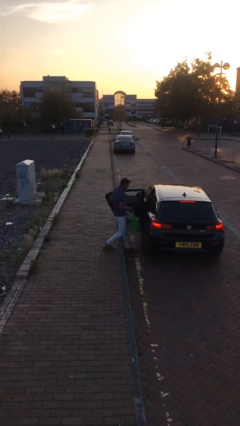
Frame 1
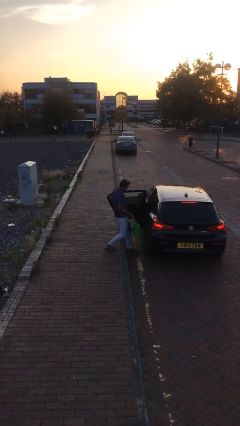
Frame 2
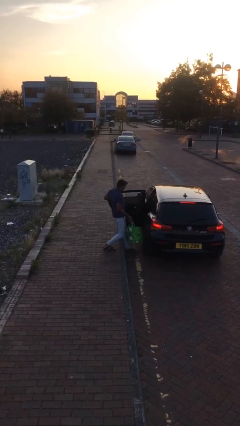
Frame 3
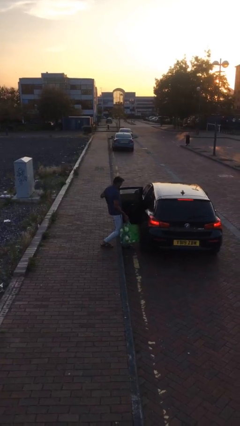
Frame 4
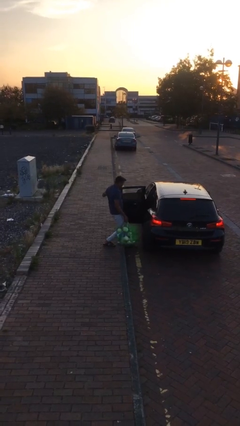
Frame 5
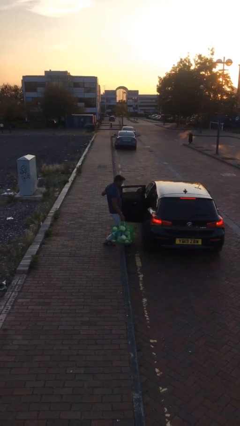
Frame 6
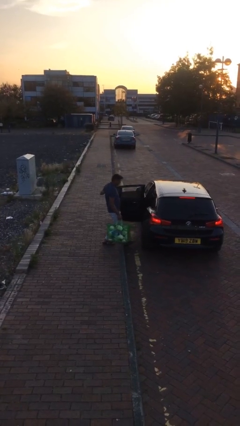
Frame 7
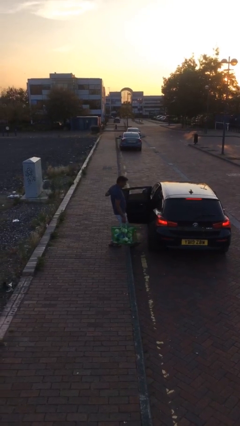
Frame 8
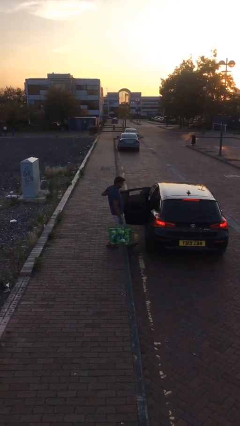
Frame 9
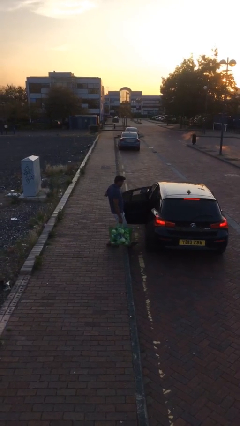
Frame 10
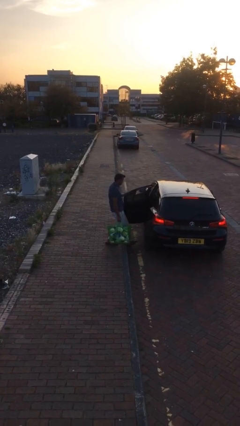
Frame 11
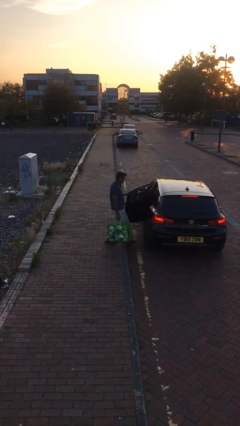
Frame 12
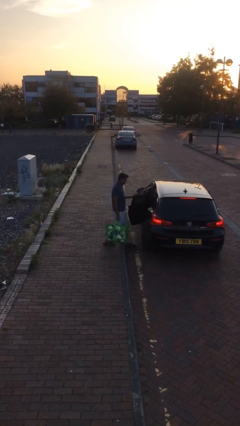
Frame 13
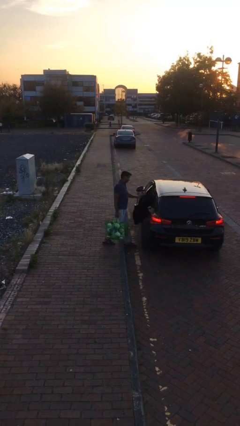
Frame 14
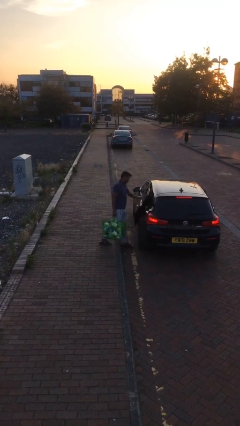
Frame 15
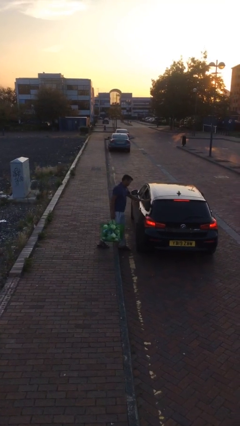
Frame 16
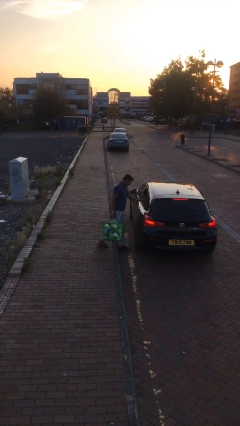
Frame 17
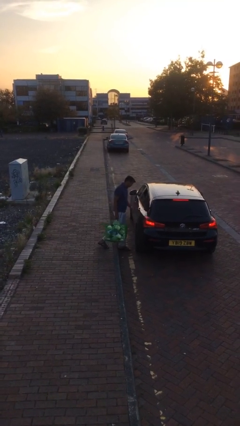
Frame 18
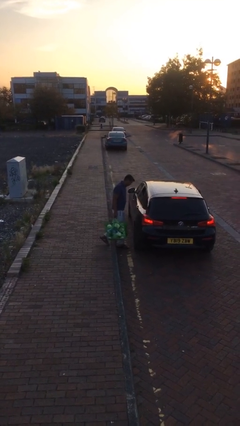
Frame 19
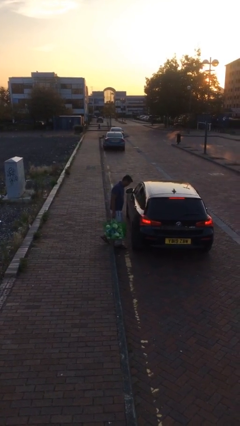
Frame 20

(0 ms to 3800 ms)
person closes car door

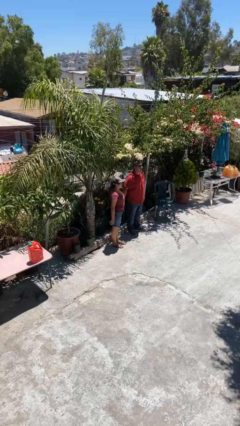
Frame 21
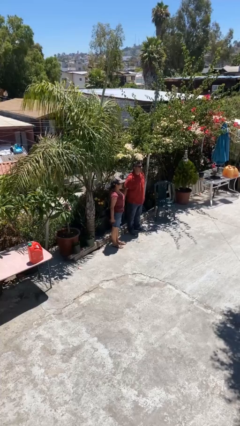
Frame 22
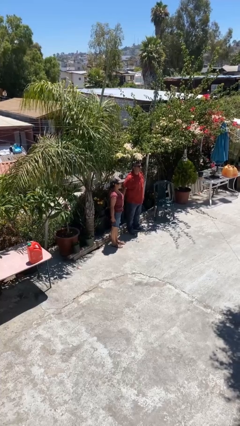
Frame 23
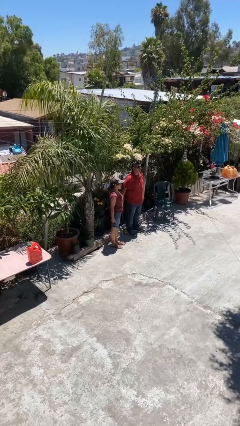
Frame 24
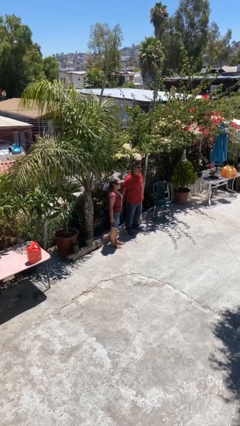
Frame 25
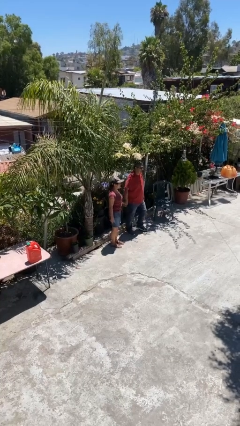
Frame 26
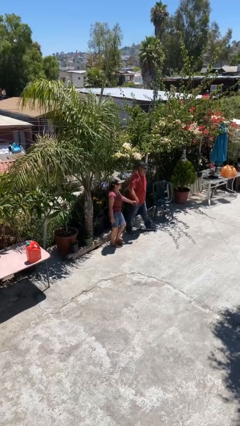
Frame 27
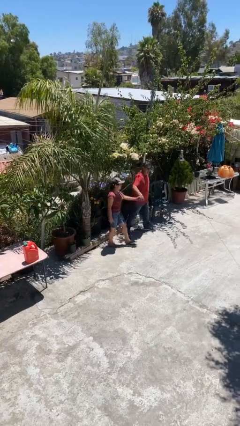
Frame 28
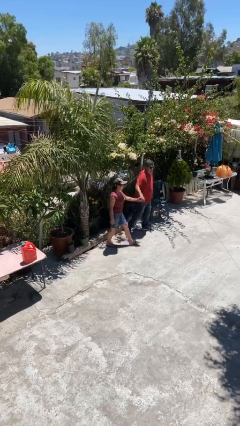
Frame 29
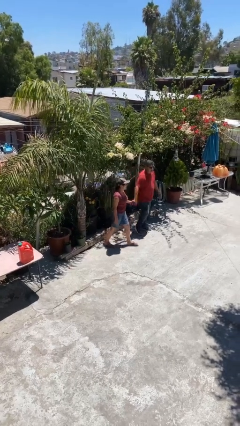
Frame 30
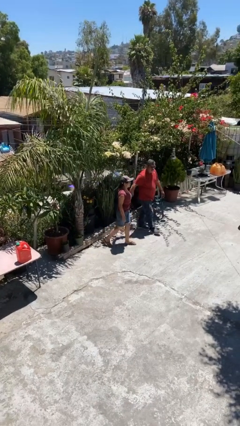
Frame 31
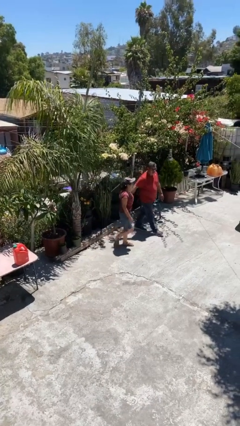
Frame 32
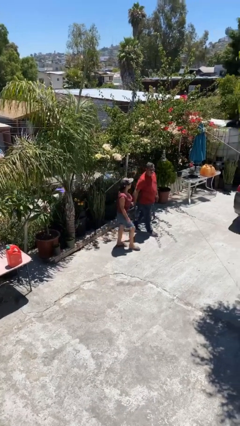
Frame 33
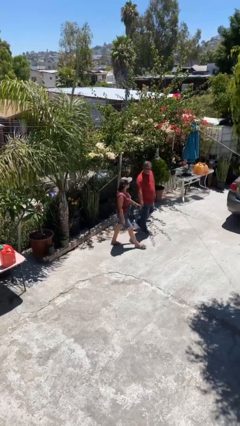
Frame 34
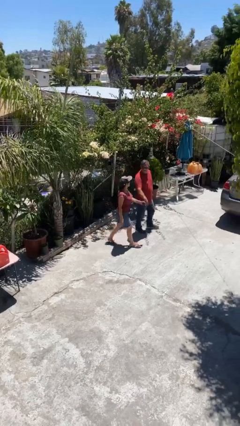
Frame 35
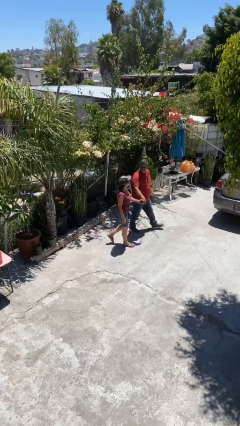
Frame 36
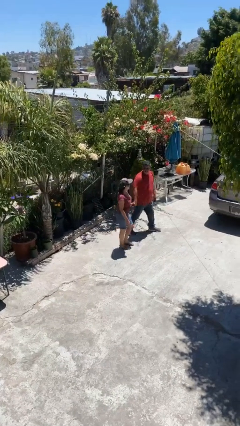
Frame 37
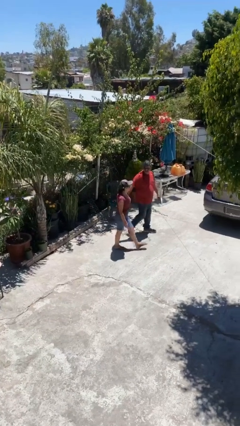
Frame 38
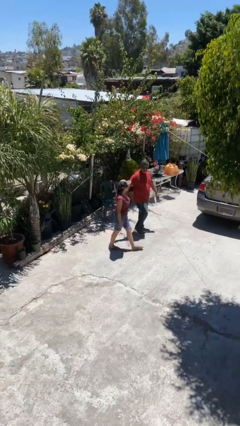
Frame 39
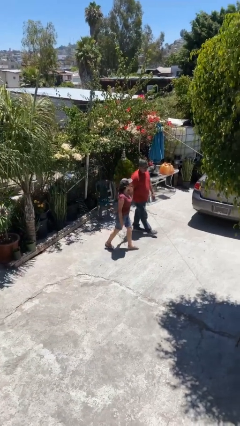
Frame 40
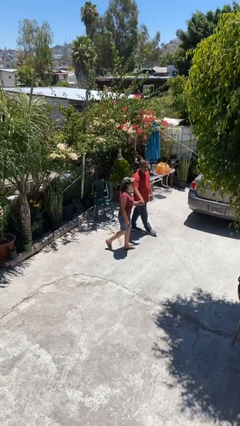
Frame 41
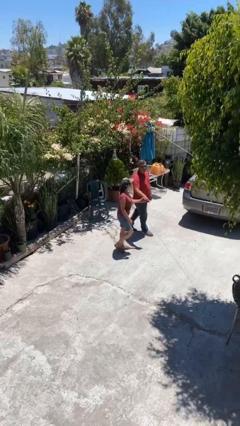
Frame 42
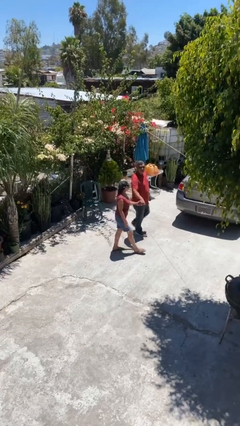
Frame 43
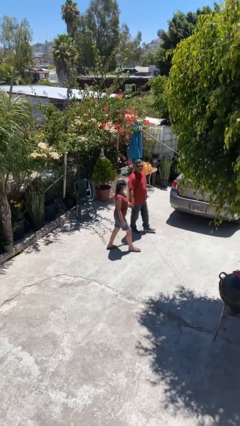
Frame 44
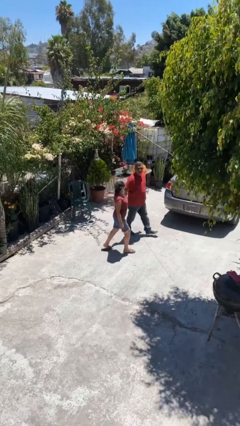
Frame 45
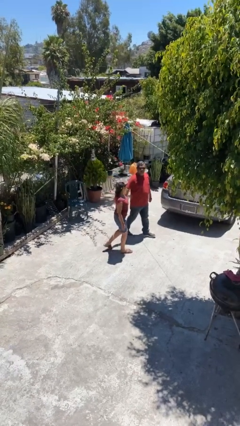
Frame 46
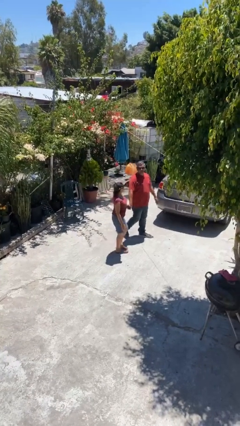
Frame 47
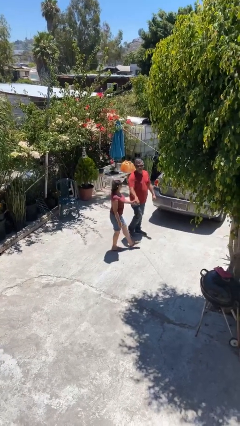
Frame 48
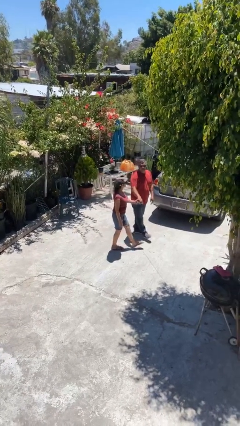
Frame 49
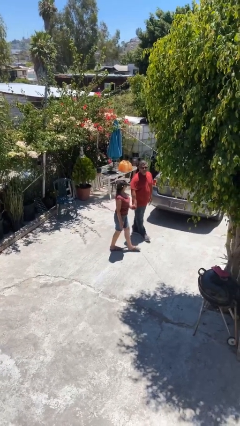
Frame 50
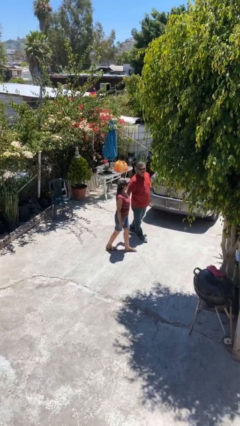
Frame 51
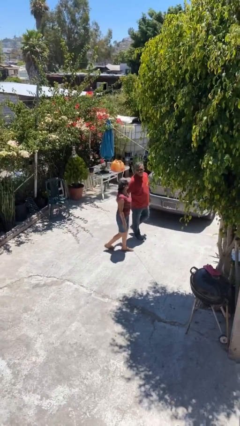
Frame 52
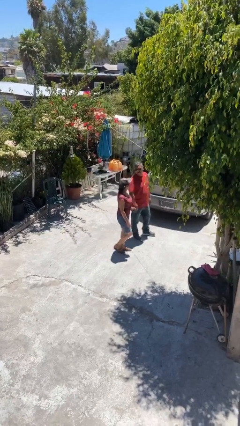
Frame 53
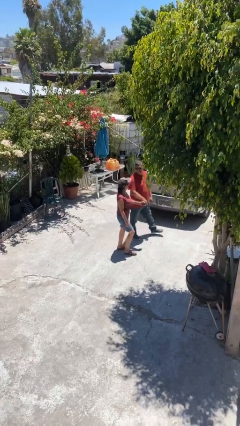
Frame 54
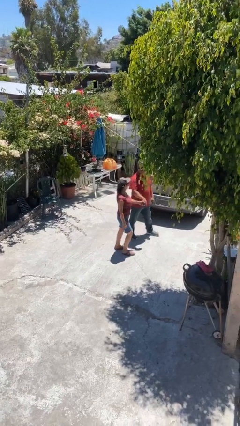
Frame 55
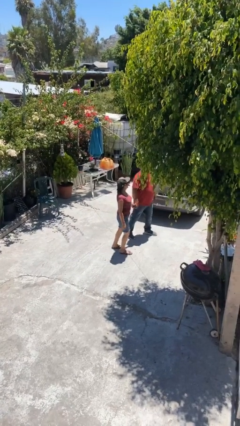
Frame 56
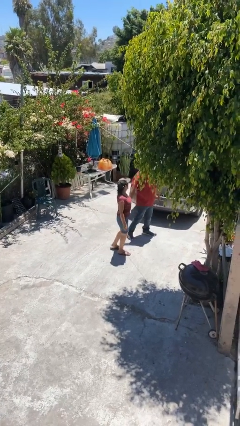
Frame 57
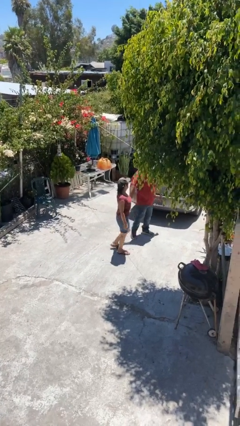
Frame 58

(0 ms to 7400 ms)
person holds hand

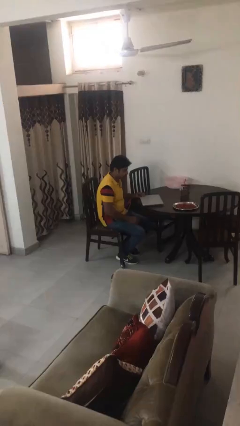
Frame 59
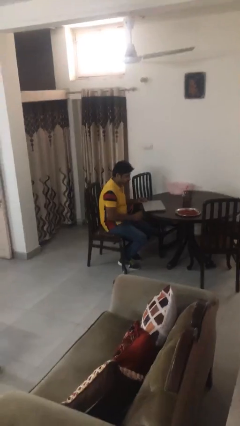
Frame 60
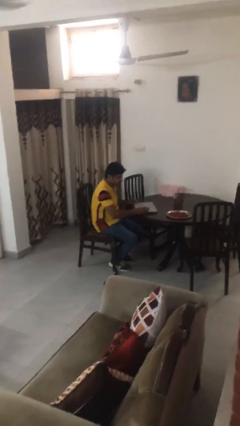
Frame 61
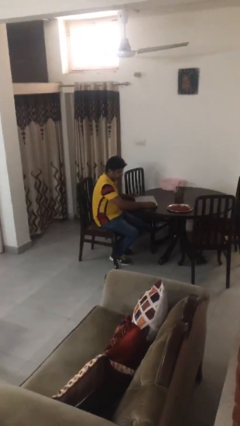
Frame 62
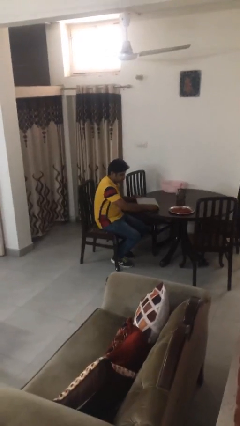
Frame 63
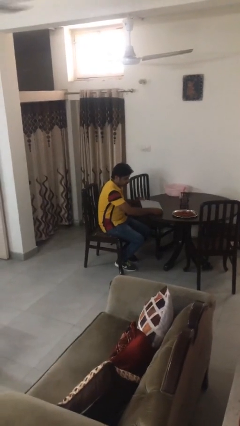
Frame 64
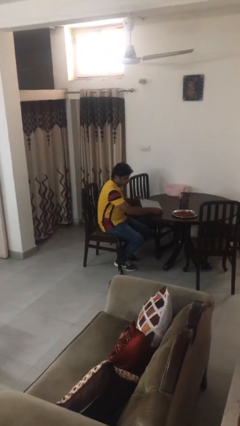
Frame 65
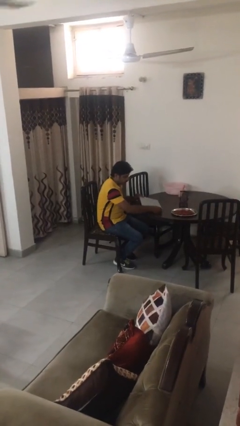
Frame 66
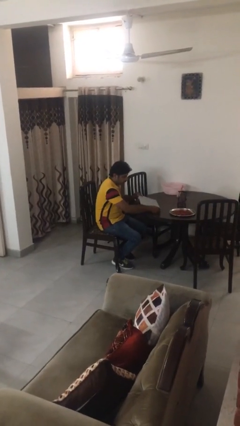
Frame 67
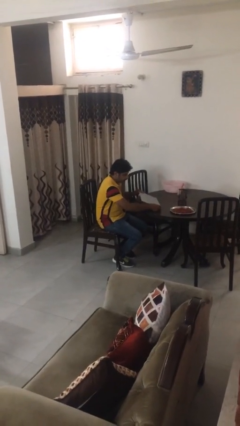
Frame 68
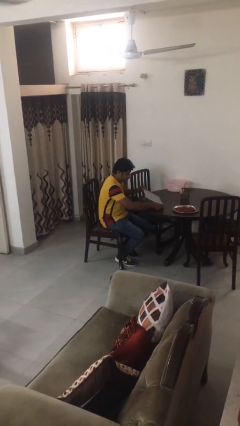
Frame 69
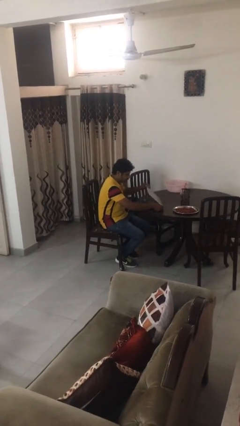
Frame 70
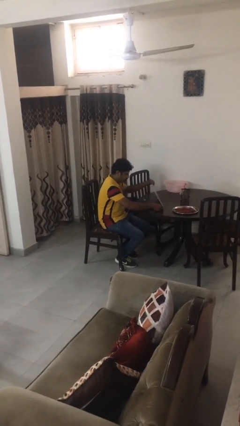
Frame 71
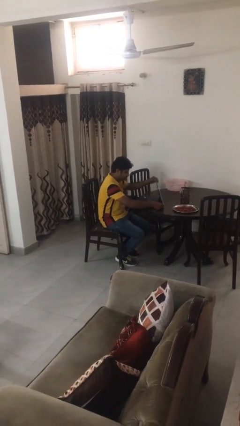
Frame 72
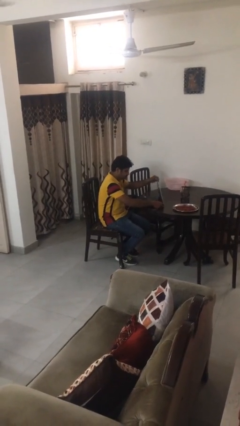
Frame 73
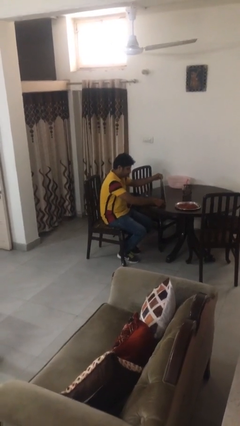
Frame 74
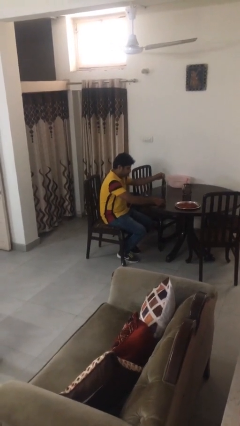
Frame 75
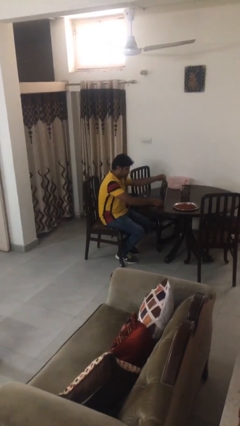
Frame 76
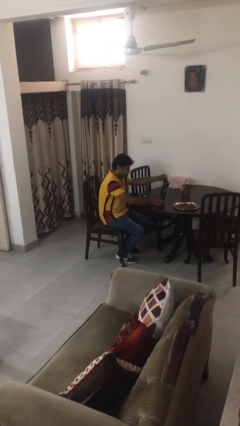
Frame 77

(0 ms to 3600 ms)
person opens laptop

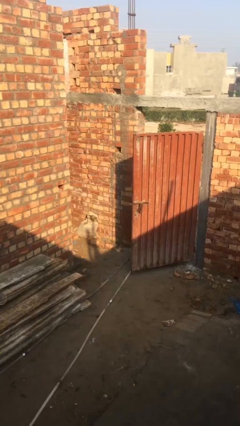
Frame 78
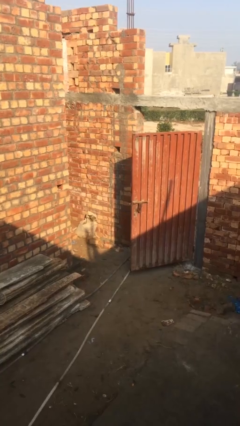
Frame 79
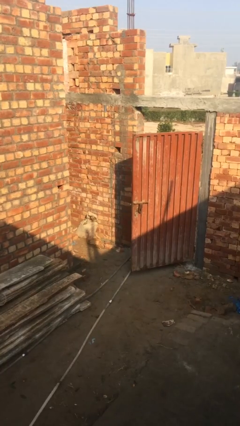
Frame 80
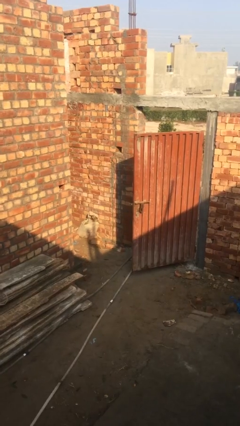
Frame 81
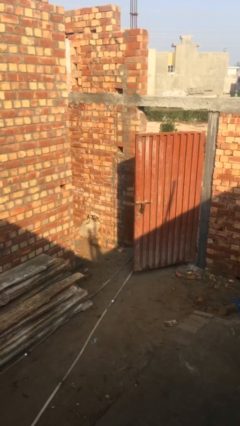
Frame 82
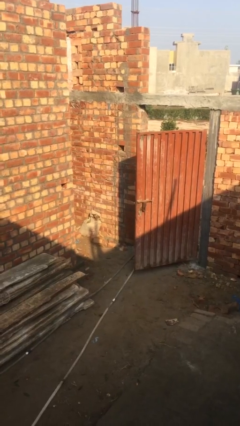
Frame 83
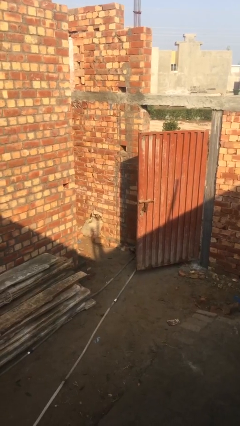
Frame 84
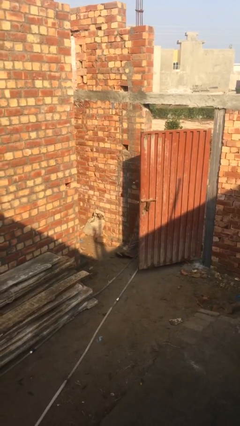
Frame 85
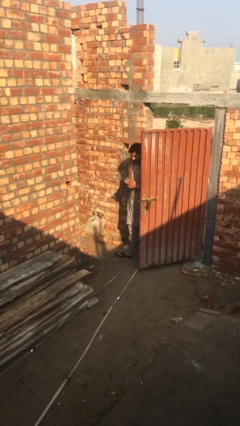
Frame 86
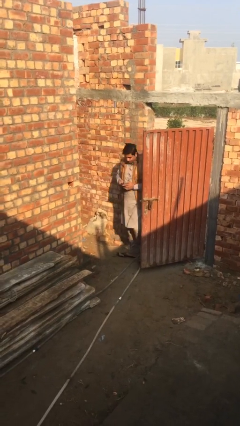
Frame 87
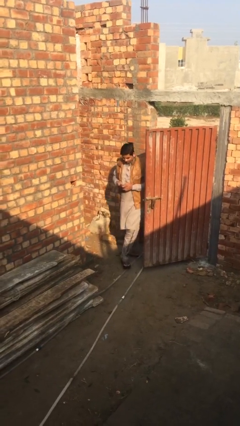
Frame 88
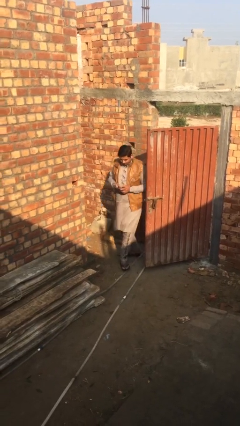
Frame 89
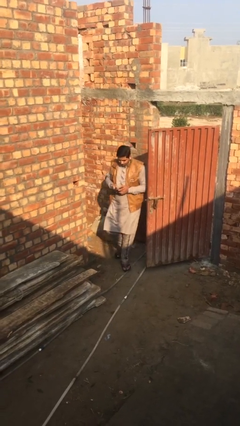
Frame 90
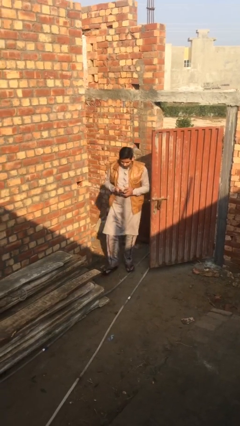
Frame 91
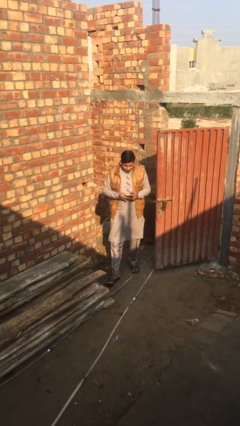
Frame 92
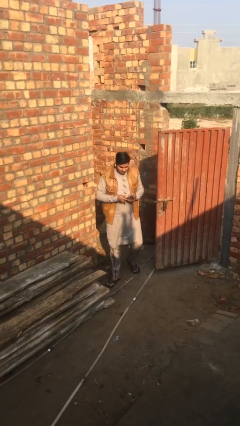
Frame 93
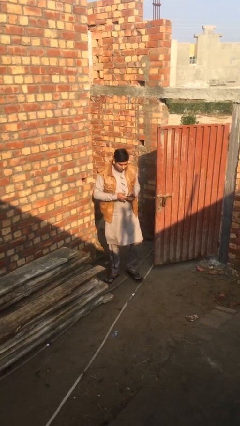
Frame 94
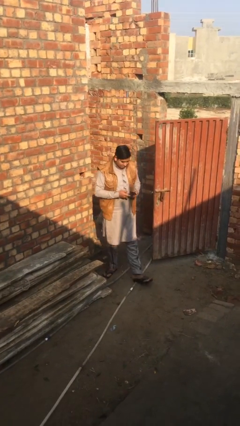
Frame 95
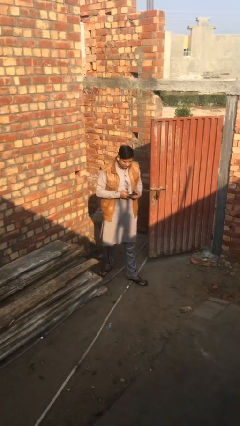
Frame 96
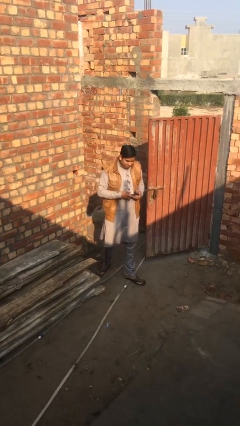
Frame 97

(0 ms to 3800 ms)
person enters scene through structure
